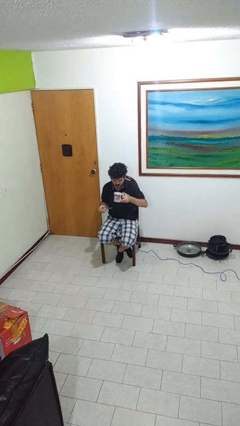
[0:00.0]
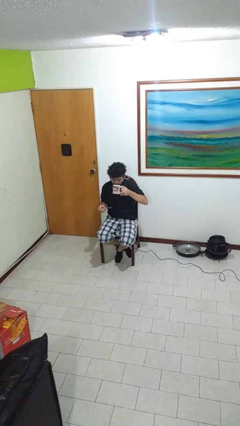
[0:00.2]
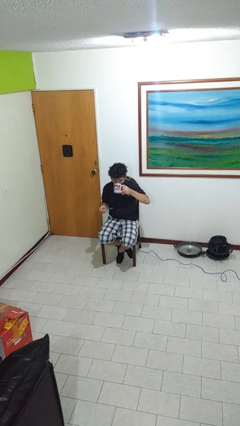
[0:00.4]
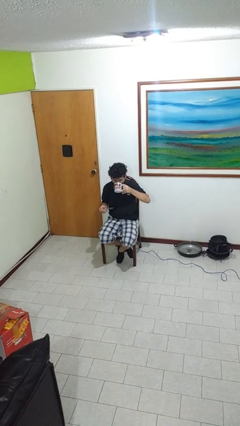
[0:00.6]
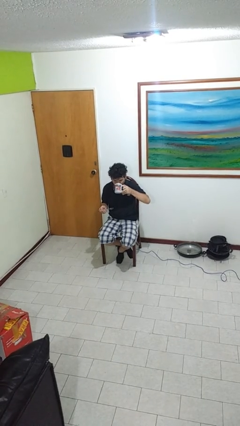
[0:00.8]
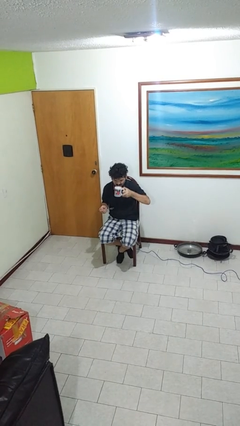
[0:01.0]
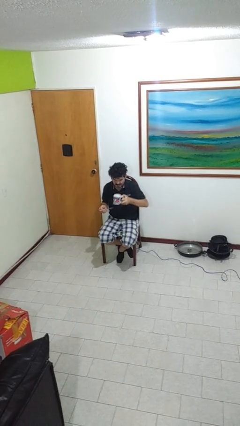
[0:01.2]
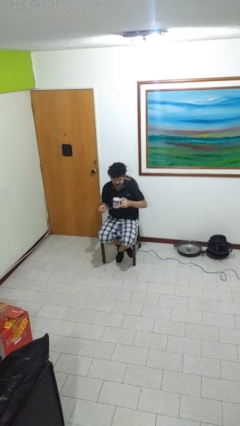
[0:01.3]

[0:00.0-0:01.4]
person drinks from mug

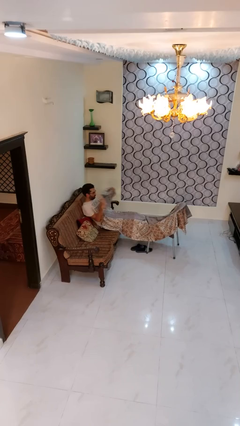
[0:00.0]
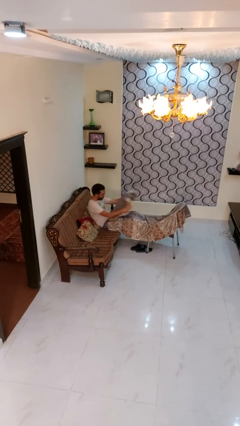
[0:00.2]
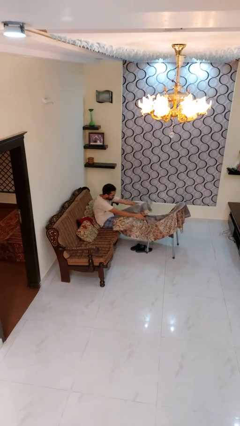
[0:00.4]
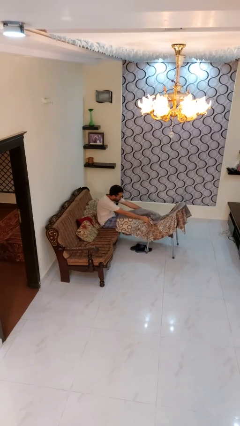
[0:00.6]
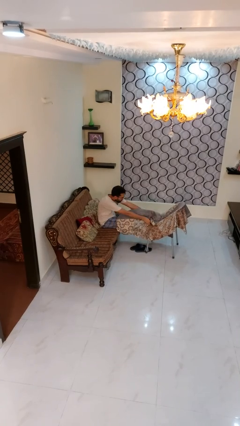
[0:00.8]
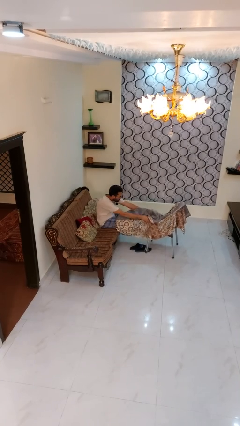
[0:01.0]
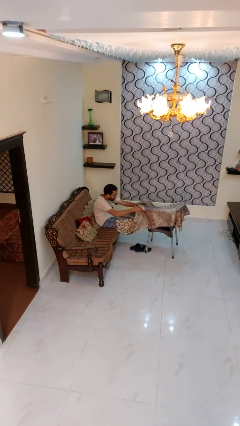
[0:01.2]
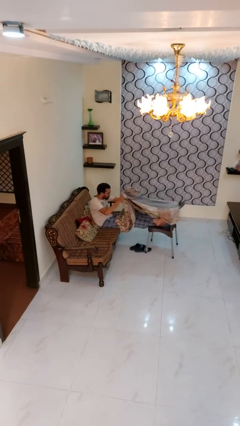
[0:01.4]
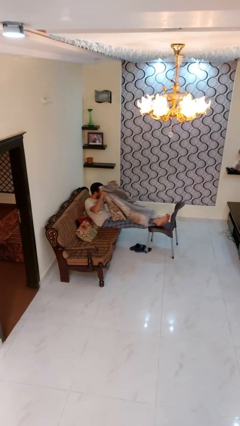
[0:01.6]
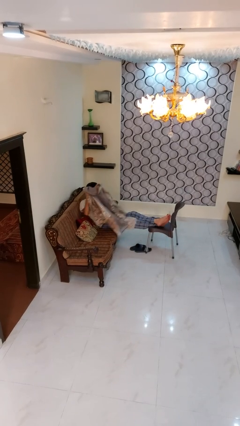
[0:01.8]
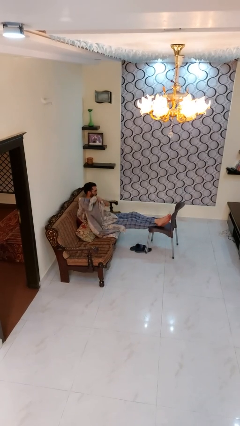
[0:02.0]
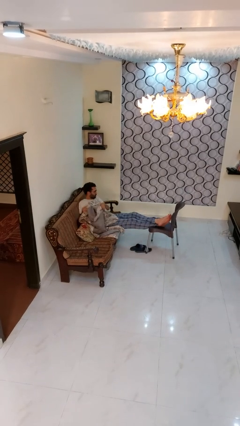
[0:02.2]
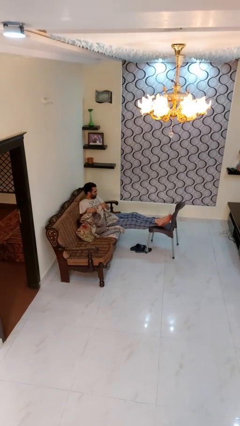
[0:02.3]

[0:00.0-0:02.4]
person uncovers with blanket

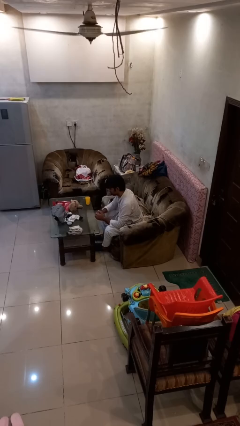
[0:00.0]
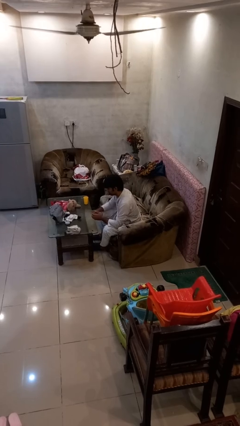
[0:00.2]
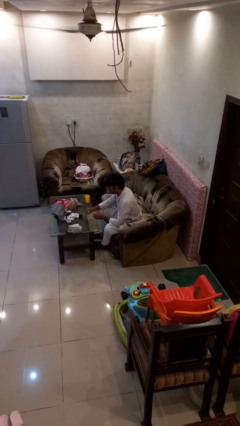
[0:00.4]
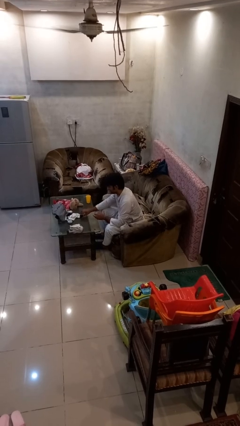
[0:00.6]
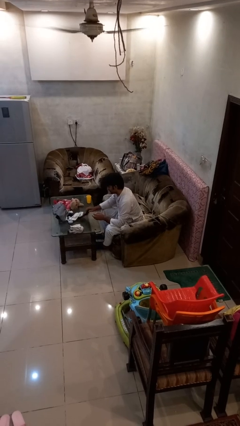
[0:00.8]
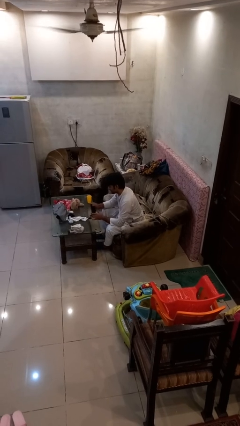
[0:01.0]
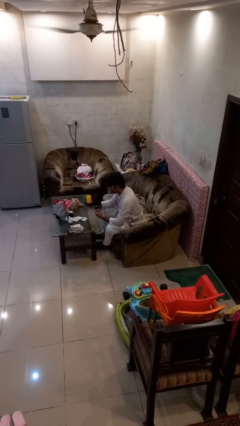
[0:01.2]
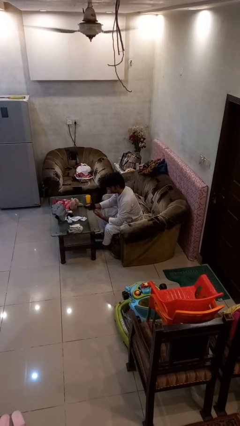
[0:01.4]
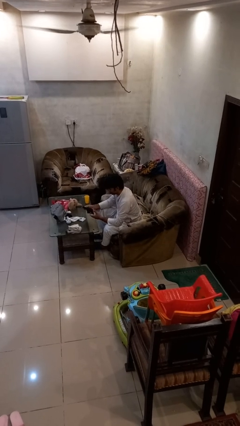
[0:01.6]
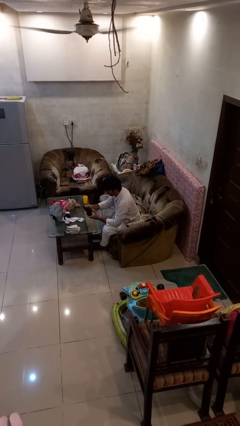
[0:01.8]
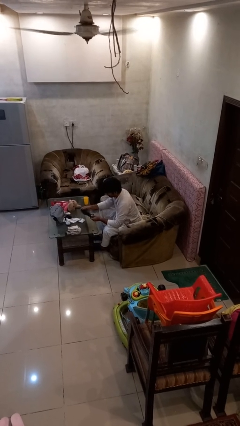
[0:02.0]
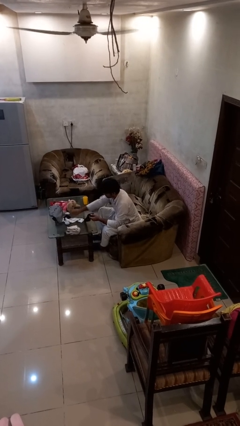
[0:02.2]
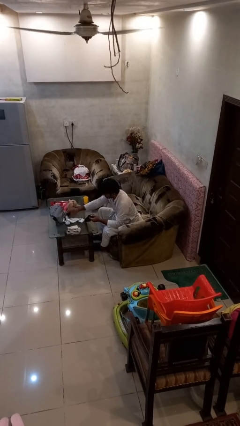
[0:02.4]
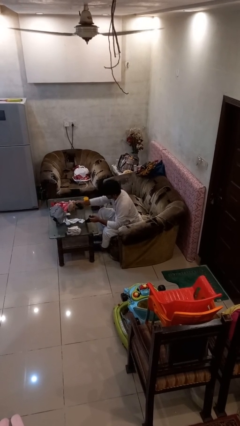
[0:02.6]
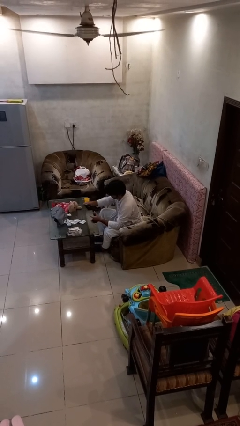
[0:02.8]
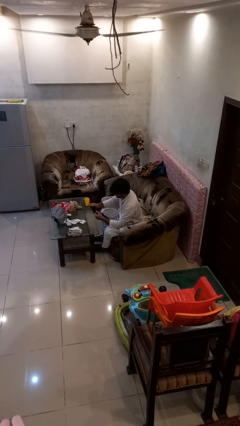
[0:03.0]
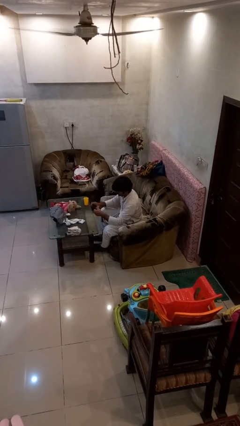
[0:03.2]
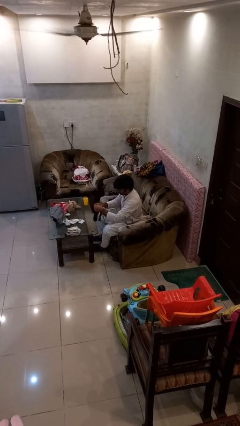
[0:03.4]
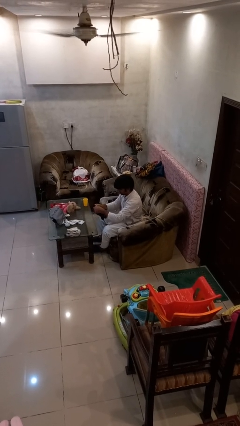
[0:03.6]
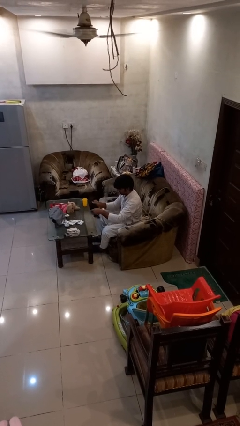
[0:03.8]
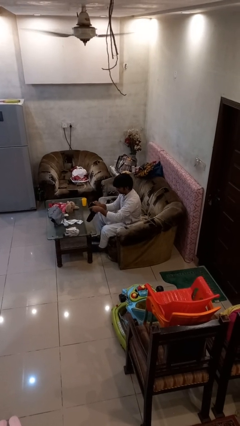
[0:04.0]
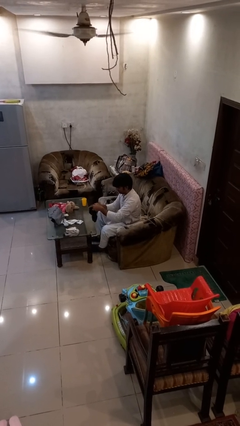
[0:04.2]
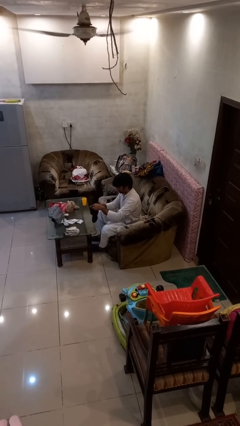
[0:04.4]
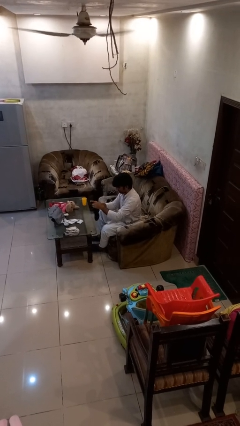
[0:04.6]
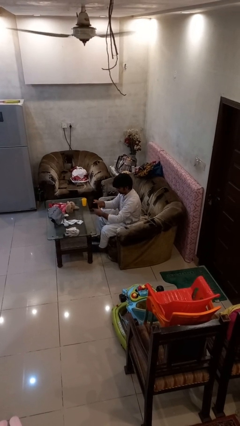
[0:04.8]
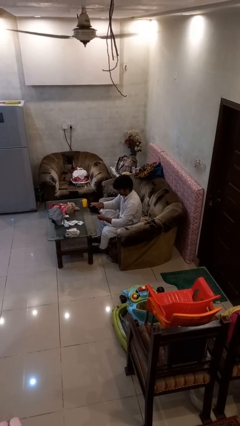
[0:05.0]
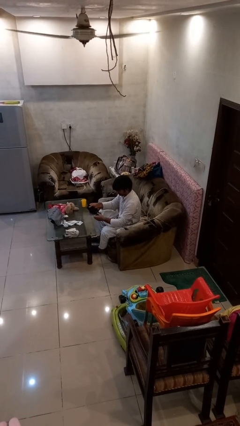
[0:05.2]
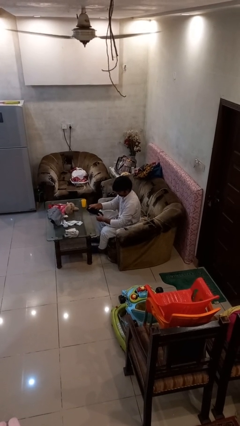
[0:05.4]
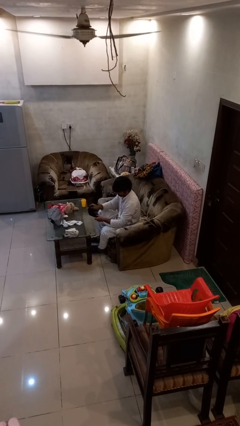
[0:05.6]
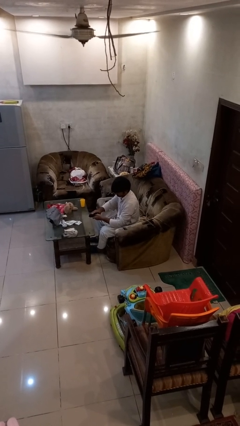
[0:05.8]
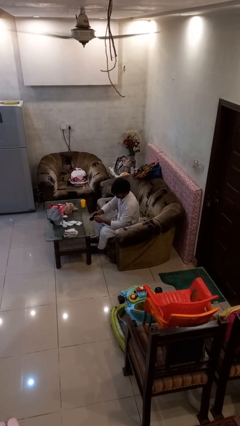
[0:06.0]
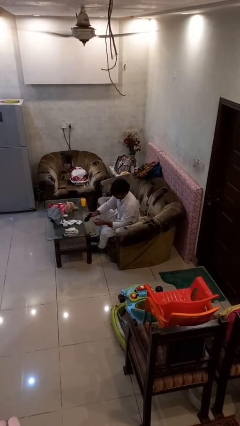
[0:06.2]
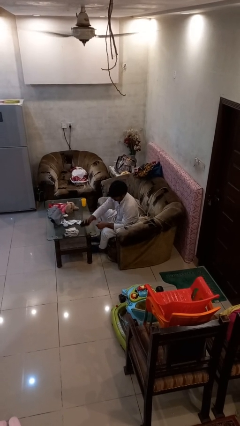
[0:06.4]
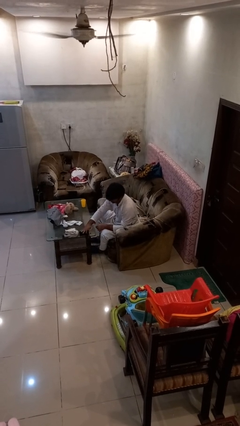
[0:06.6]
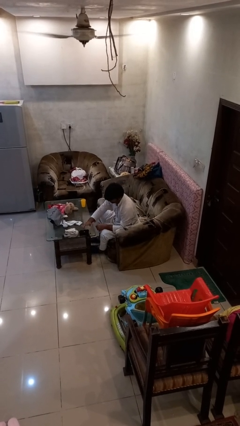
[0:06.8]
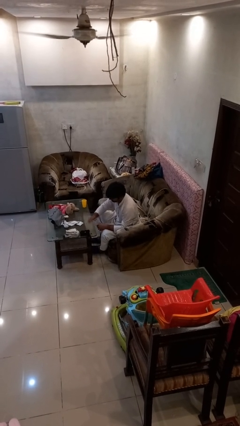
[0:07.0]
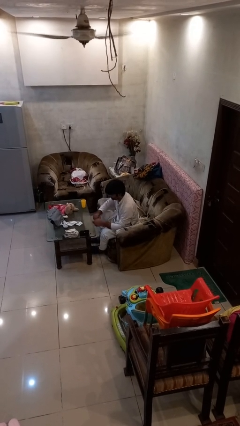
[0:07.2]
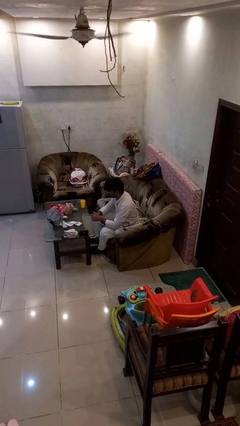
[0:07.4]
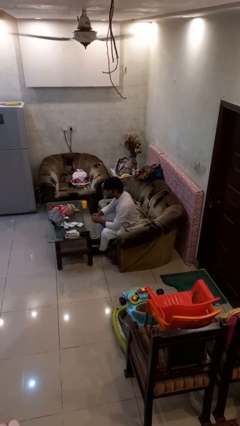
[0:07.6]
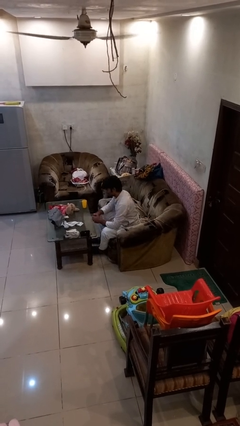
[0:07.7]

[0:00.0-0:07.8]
person folds socks

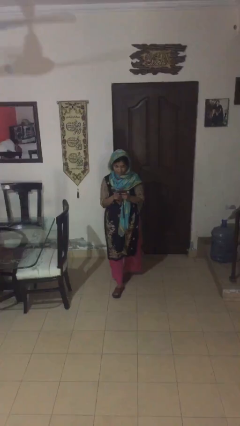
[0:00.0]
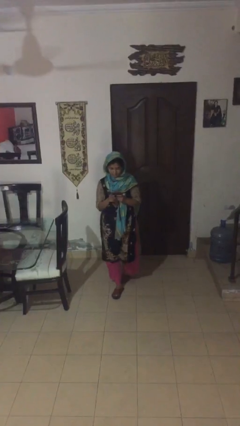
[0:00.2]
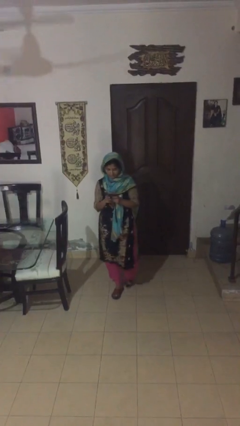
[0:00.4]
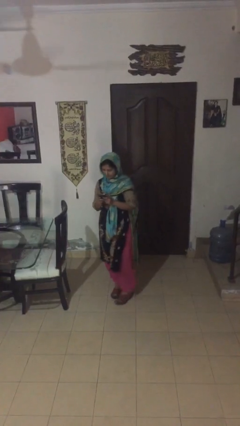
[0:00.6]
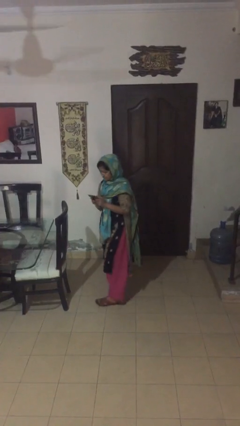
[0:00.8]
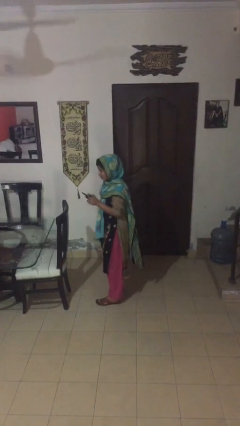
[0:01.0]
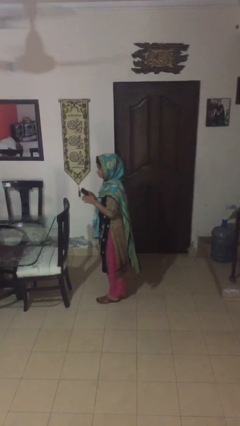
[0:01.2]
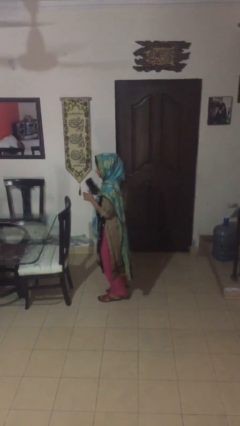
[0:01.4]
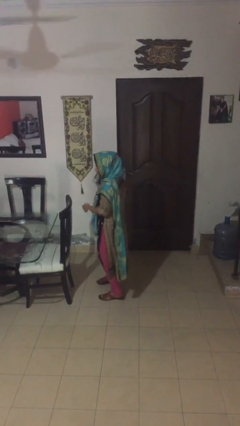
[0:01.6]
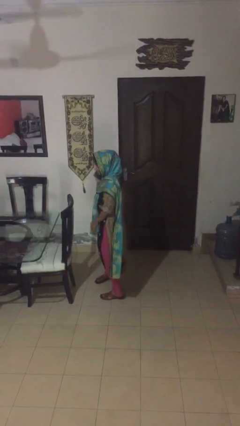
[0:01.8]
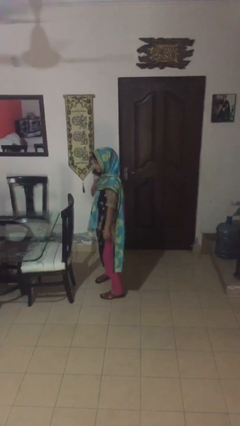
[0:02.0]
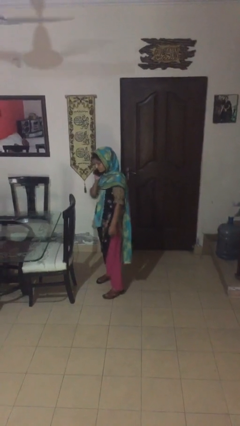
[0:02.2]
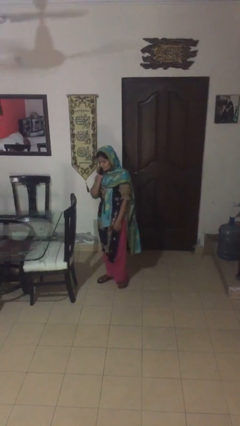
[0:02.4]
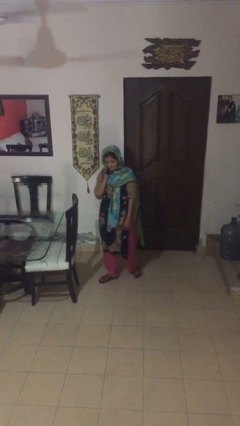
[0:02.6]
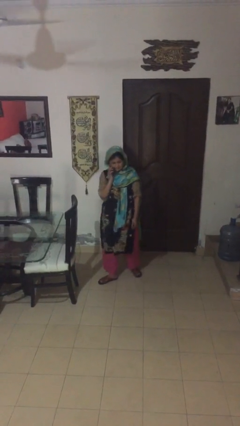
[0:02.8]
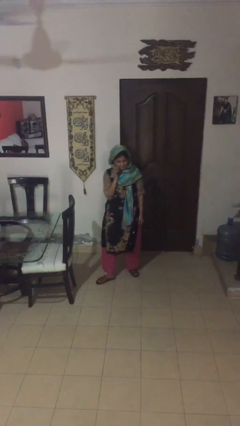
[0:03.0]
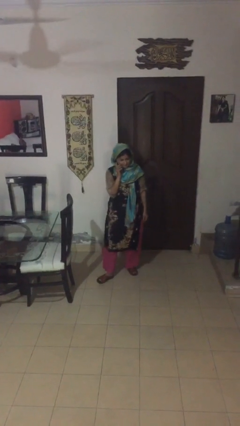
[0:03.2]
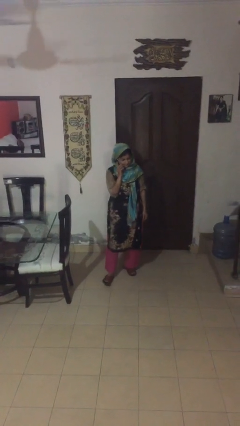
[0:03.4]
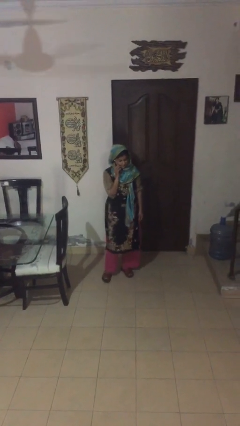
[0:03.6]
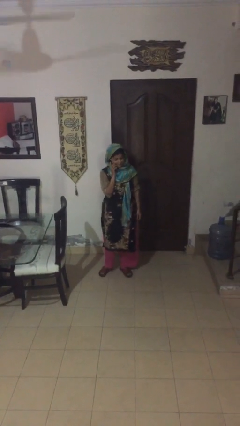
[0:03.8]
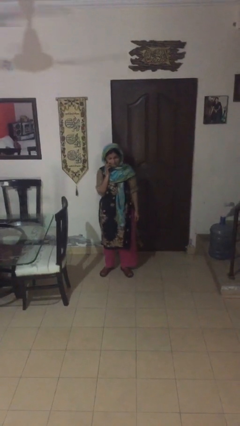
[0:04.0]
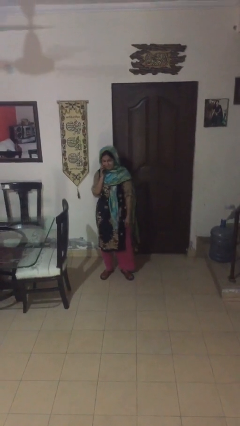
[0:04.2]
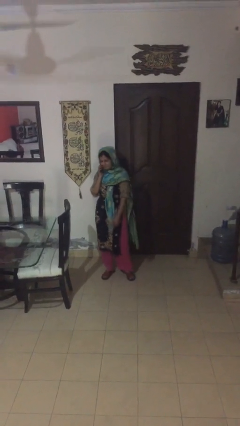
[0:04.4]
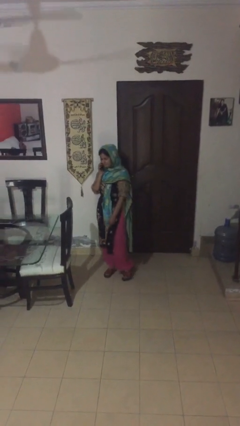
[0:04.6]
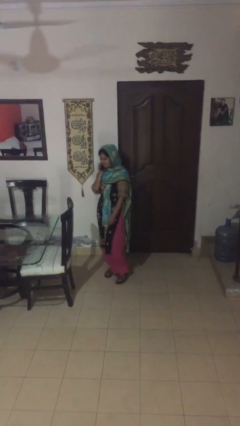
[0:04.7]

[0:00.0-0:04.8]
person talks on phone

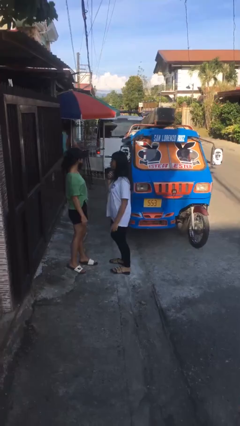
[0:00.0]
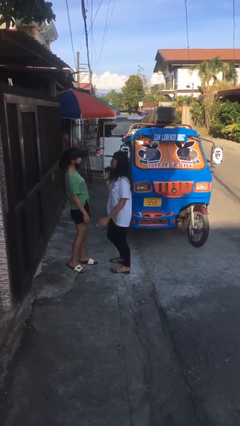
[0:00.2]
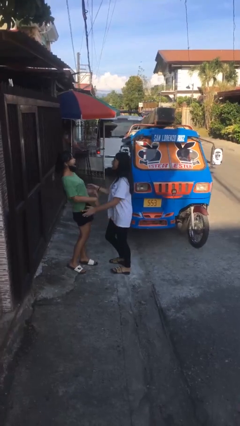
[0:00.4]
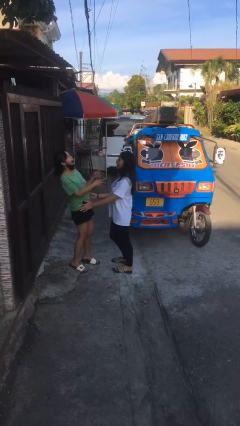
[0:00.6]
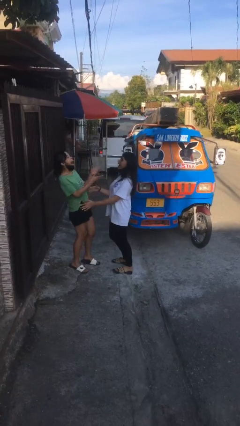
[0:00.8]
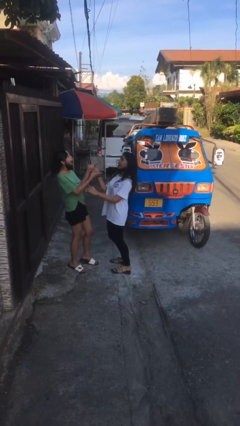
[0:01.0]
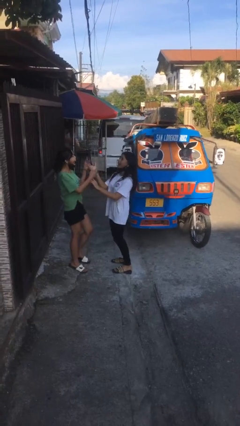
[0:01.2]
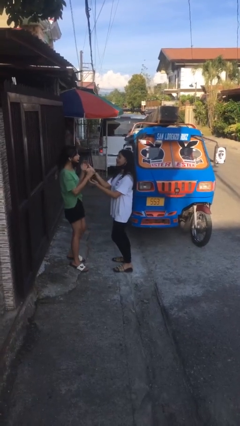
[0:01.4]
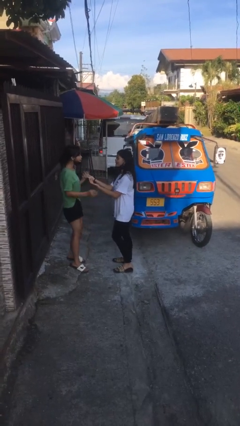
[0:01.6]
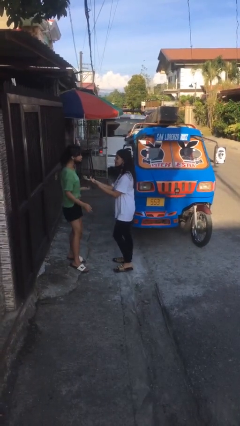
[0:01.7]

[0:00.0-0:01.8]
person laughs with person
